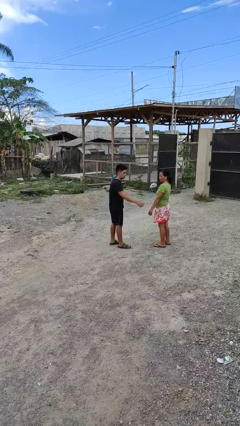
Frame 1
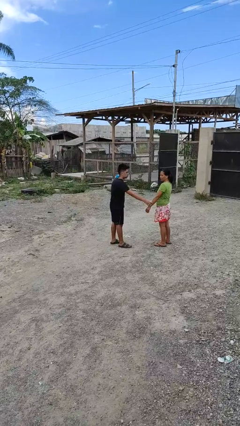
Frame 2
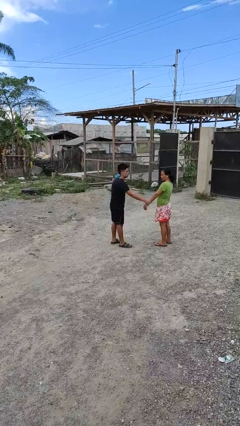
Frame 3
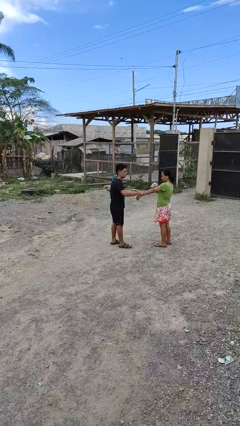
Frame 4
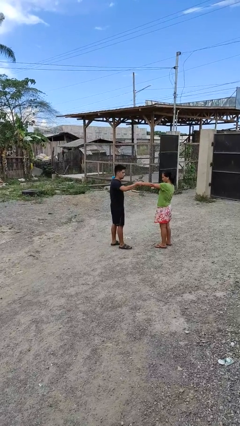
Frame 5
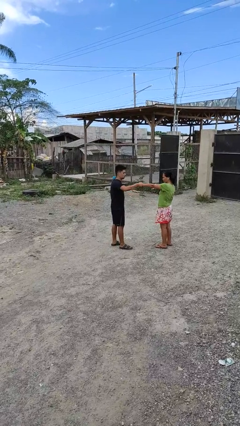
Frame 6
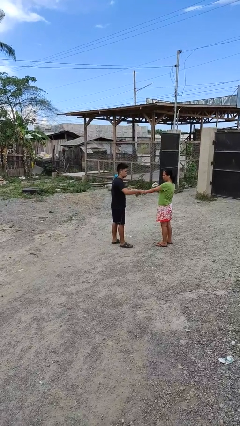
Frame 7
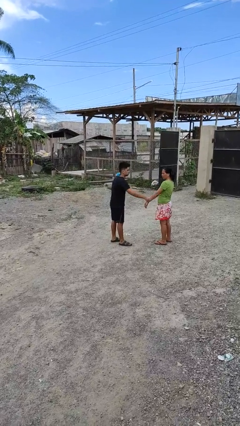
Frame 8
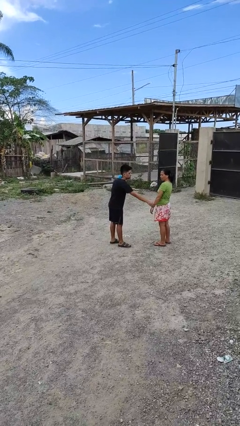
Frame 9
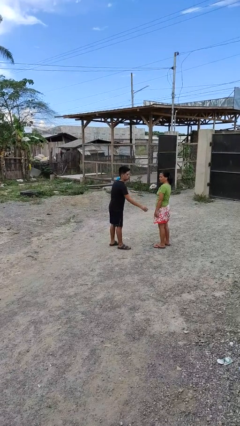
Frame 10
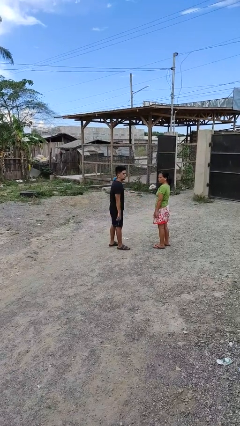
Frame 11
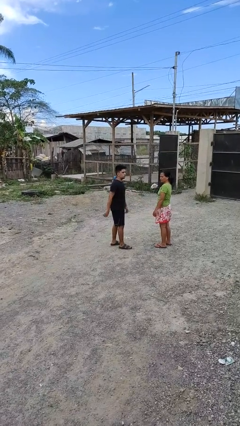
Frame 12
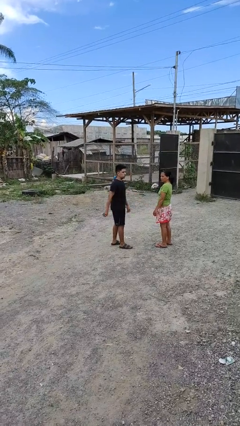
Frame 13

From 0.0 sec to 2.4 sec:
person grabs person by forearm

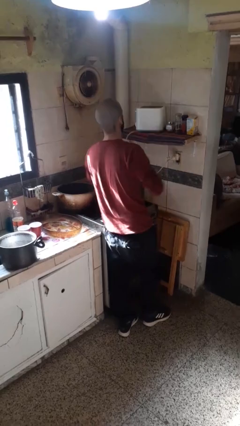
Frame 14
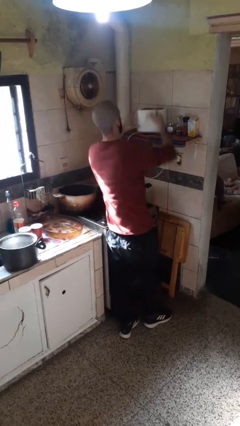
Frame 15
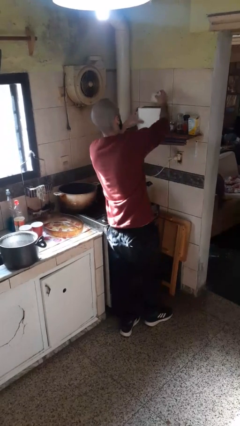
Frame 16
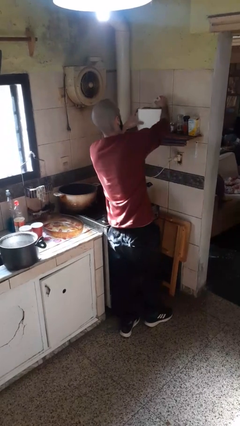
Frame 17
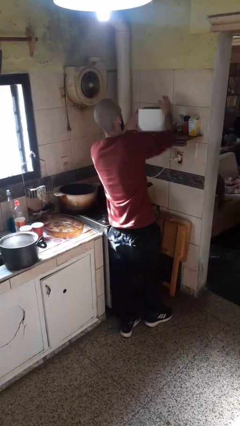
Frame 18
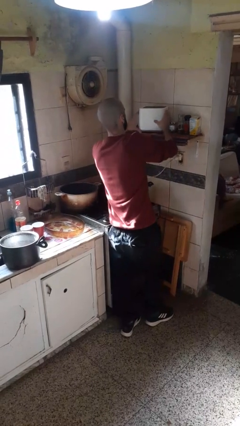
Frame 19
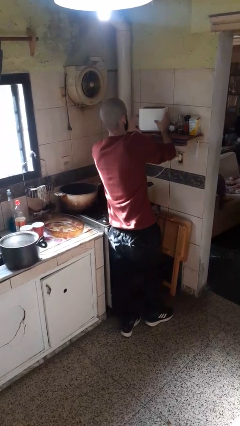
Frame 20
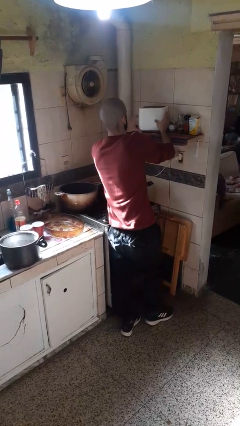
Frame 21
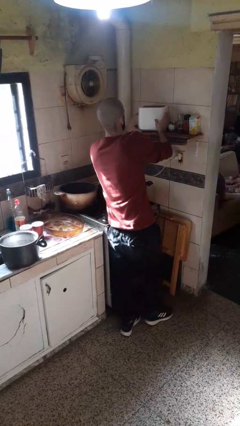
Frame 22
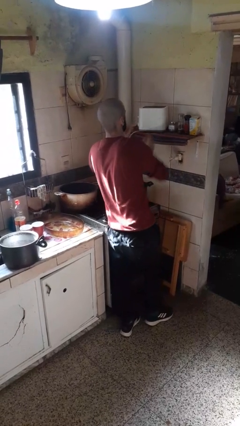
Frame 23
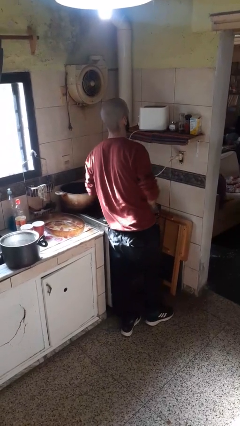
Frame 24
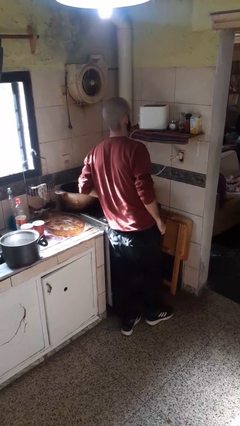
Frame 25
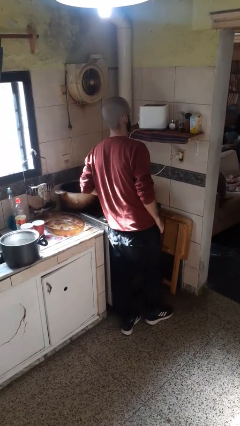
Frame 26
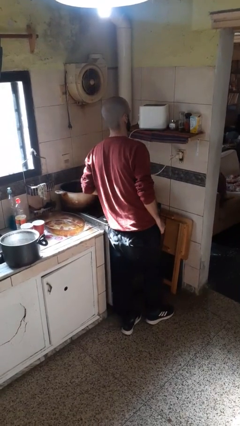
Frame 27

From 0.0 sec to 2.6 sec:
person puts object into toaster

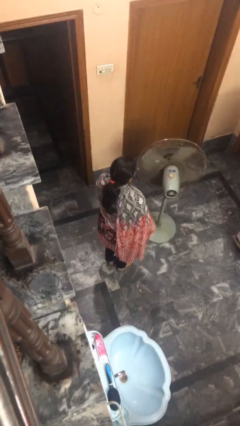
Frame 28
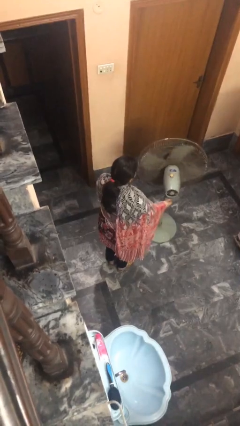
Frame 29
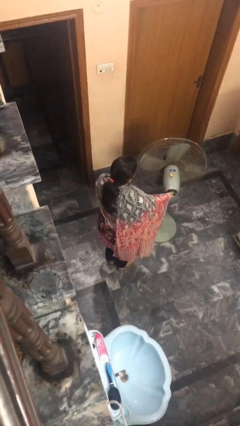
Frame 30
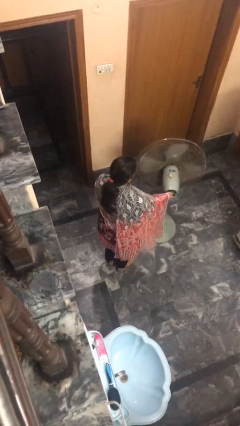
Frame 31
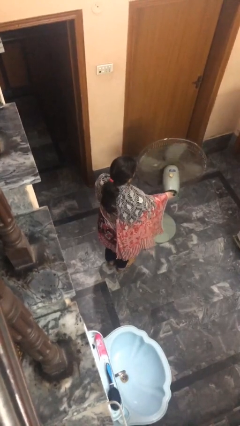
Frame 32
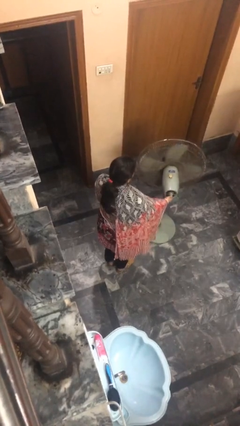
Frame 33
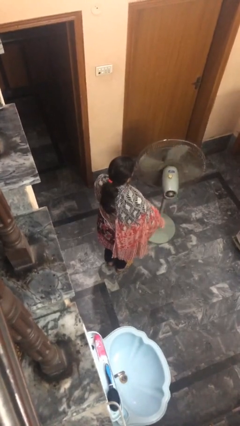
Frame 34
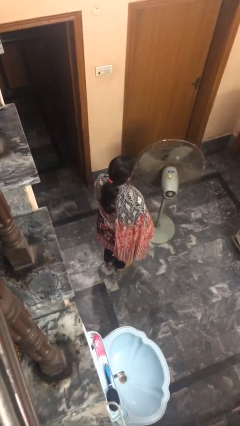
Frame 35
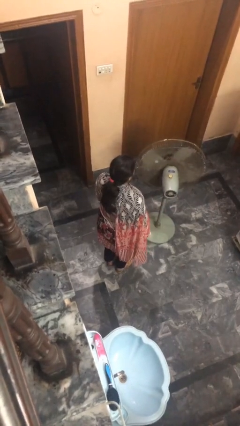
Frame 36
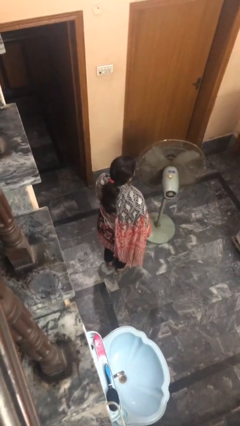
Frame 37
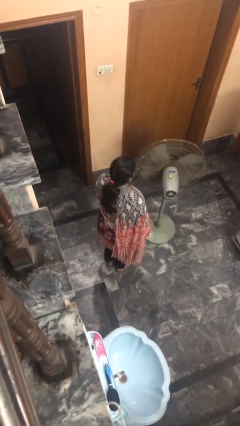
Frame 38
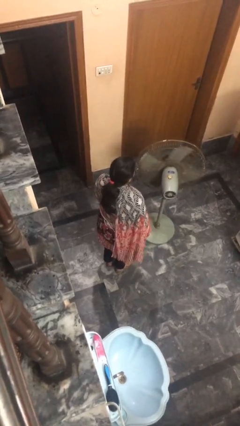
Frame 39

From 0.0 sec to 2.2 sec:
person turns off fan

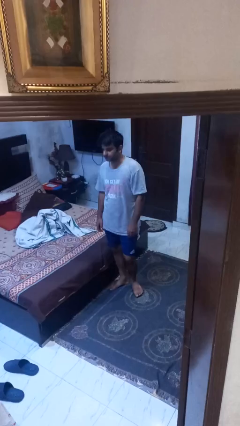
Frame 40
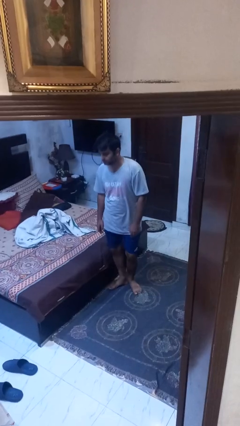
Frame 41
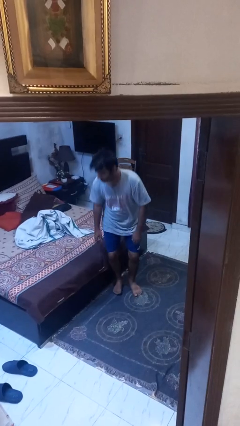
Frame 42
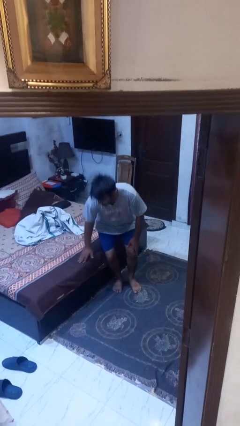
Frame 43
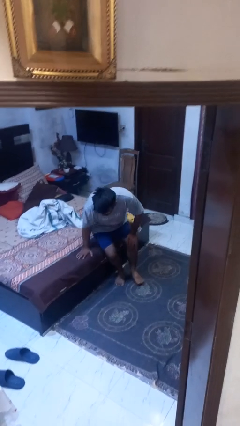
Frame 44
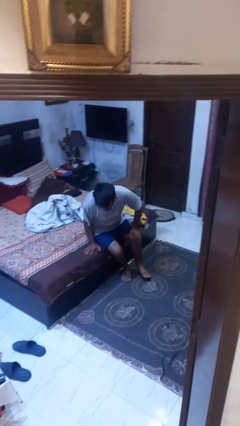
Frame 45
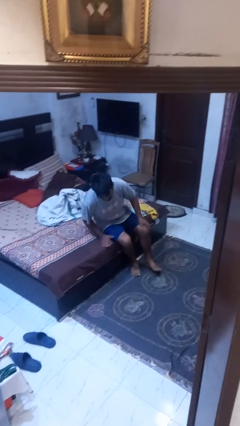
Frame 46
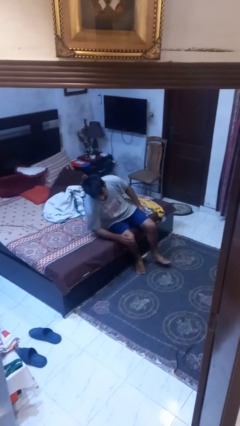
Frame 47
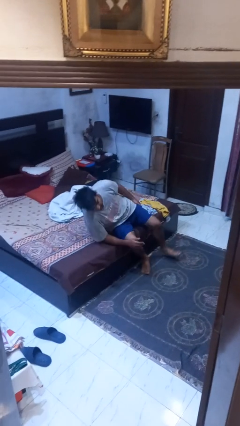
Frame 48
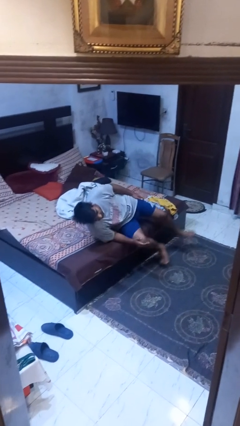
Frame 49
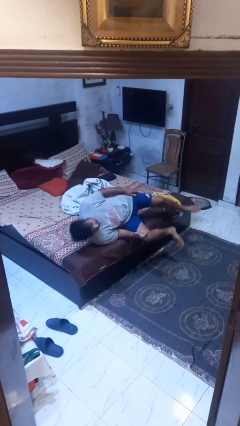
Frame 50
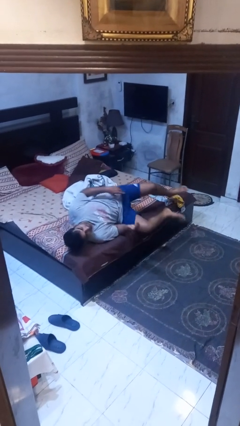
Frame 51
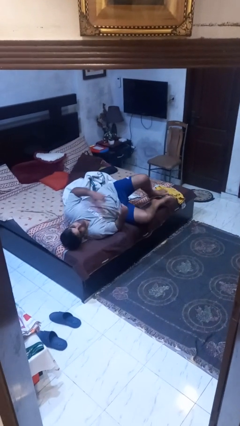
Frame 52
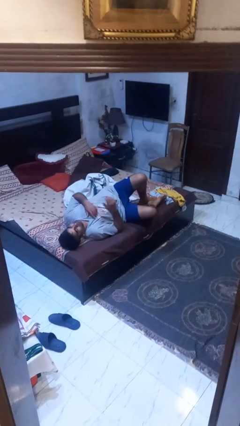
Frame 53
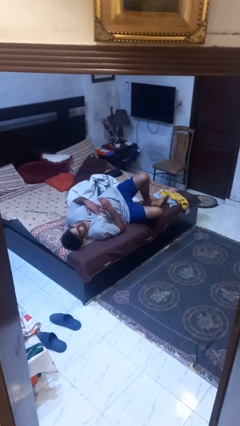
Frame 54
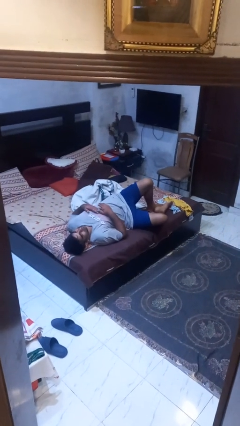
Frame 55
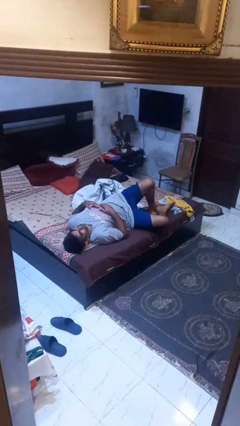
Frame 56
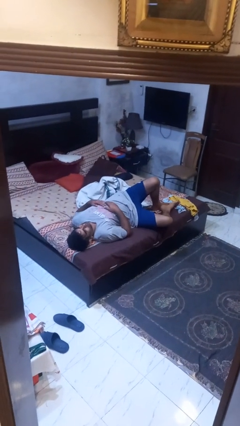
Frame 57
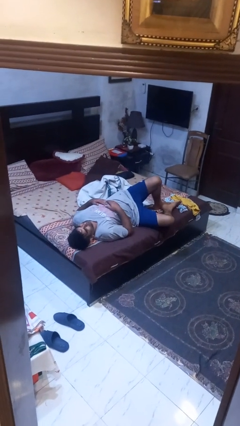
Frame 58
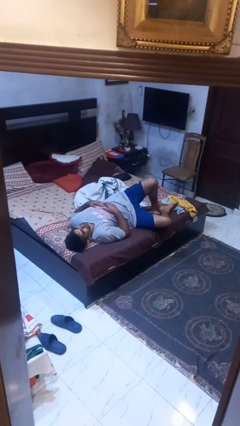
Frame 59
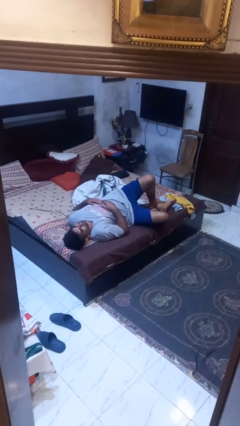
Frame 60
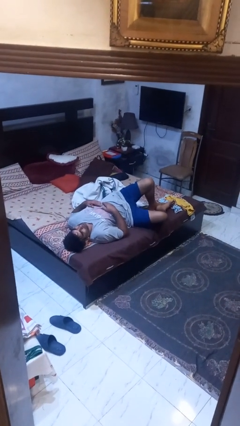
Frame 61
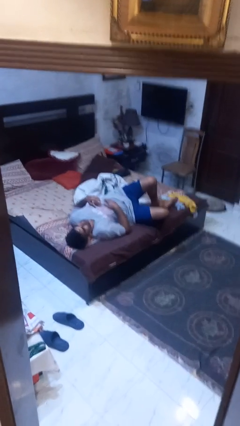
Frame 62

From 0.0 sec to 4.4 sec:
person lies down on bed

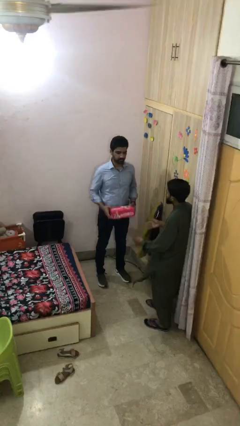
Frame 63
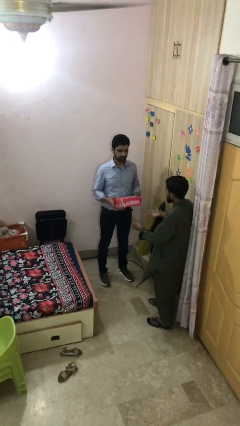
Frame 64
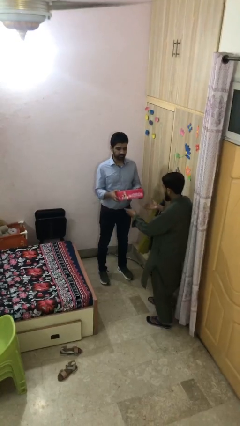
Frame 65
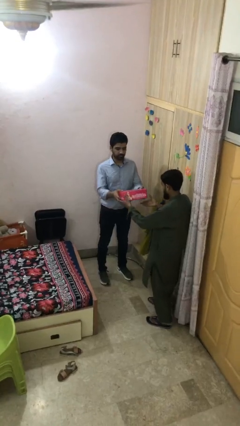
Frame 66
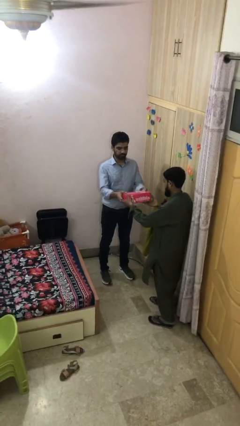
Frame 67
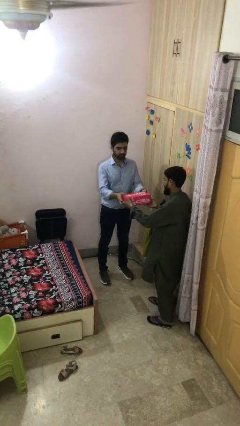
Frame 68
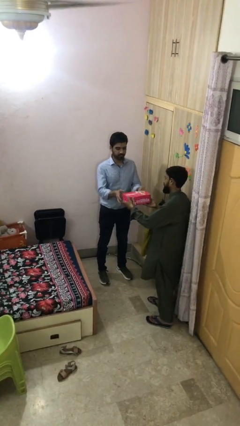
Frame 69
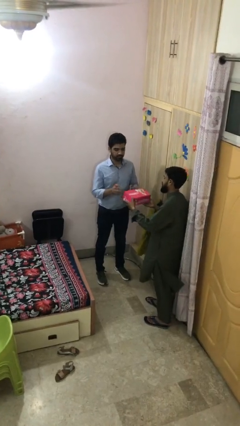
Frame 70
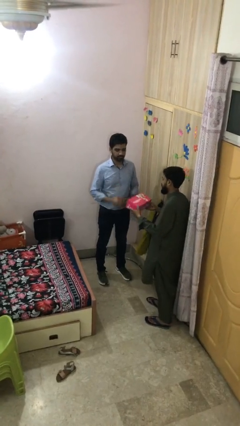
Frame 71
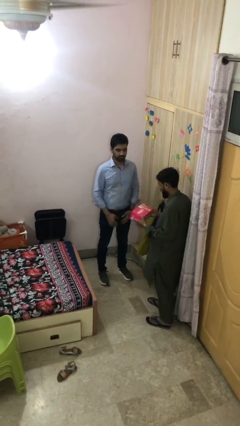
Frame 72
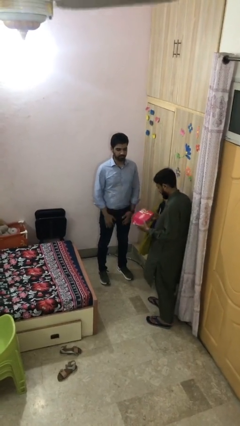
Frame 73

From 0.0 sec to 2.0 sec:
person transfers object to person

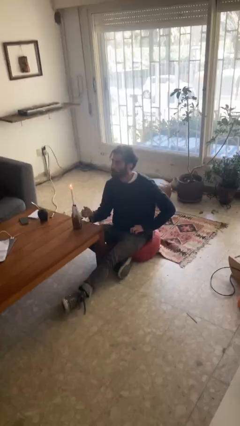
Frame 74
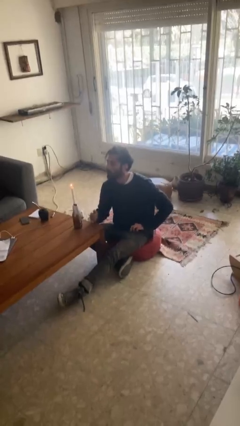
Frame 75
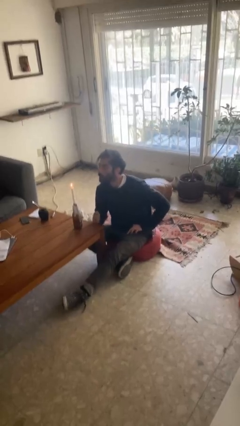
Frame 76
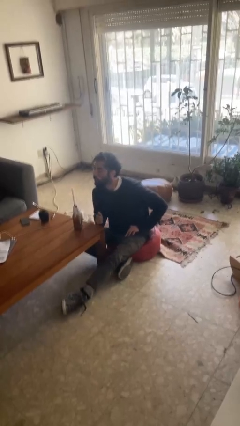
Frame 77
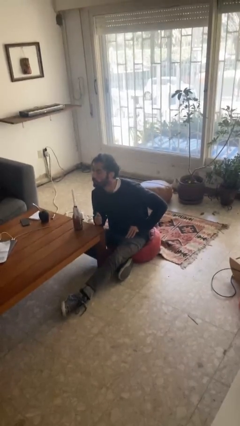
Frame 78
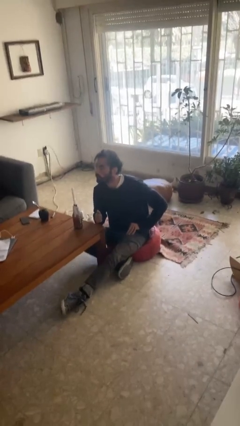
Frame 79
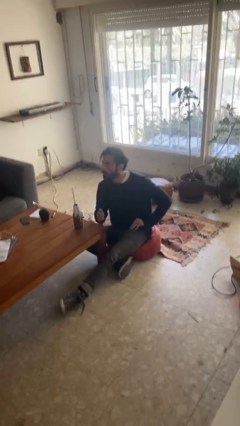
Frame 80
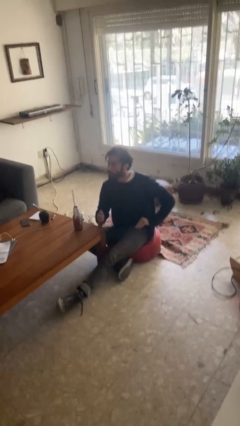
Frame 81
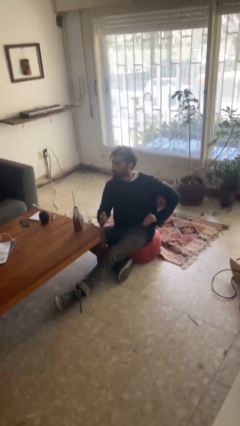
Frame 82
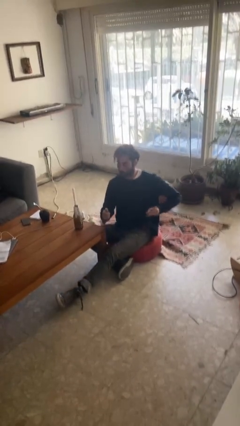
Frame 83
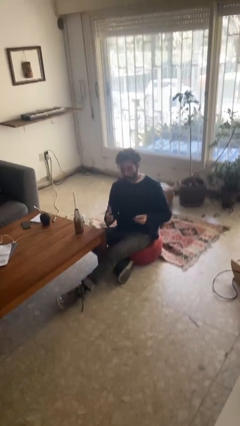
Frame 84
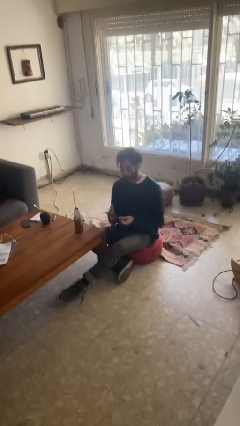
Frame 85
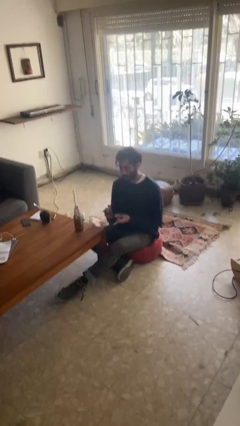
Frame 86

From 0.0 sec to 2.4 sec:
person extinguishes candle

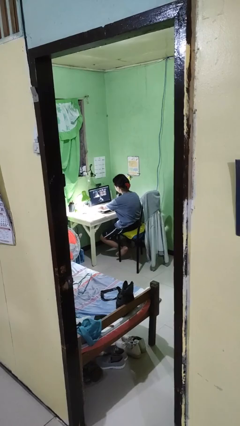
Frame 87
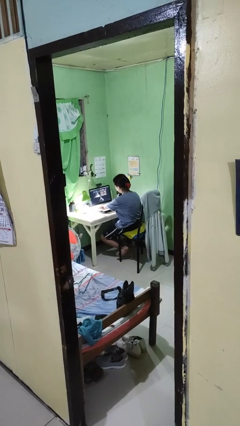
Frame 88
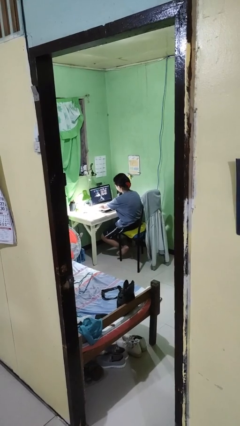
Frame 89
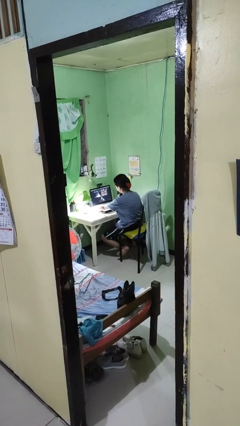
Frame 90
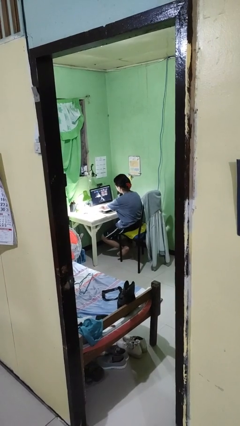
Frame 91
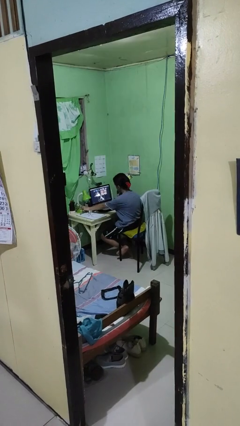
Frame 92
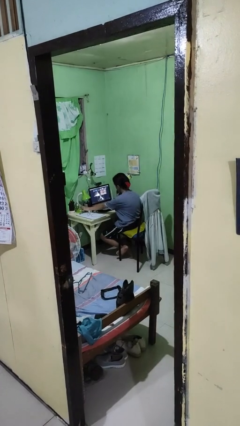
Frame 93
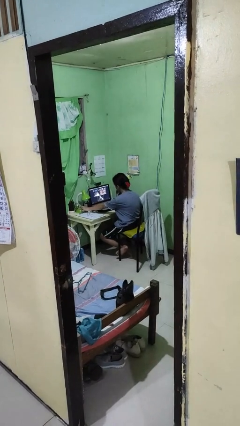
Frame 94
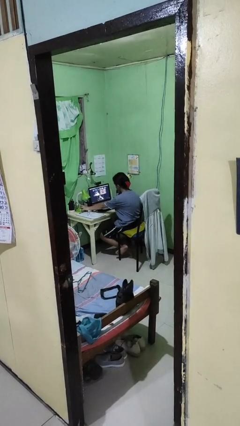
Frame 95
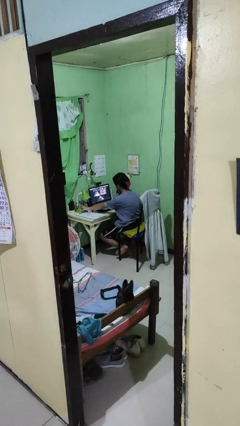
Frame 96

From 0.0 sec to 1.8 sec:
person turns off lamp
